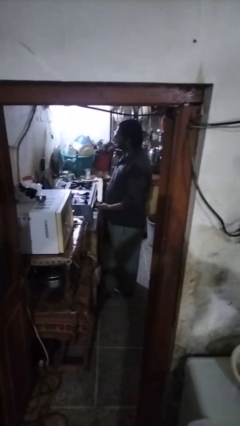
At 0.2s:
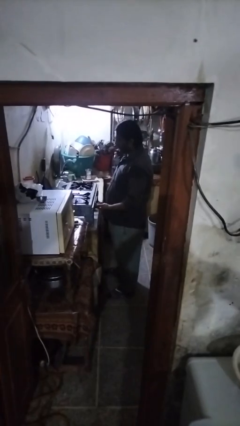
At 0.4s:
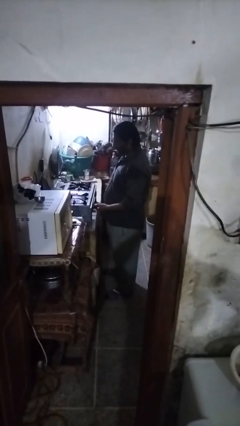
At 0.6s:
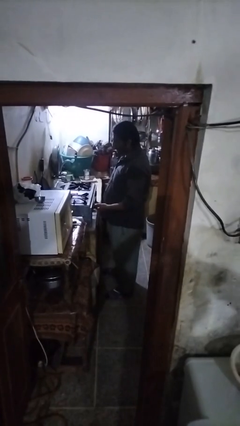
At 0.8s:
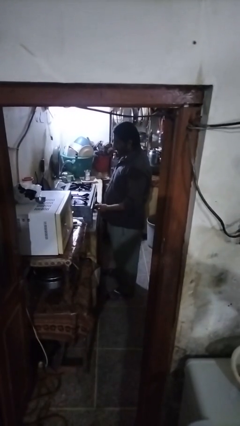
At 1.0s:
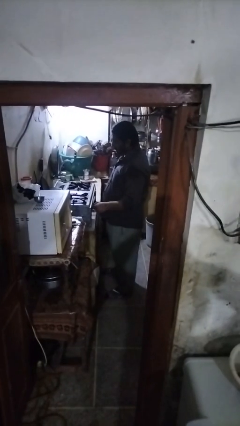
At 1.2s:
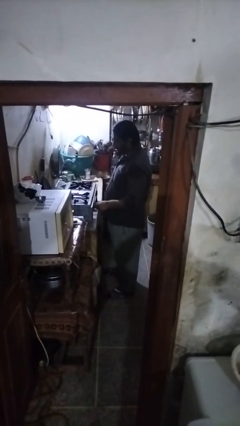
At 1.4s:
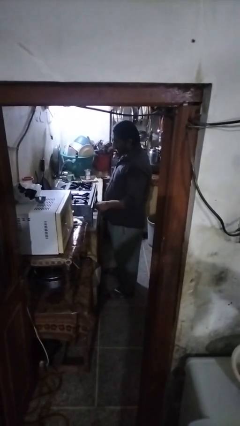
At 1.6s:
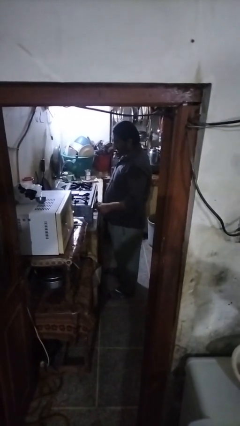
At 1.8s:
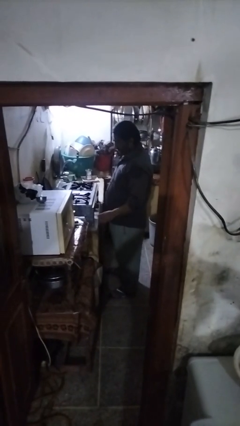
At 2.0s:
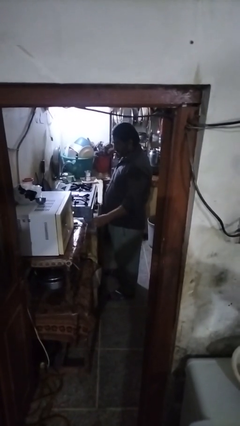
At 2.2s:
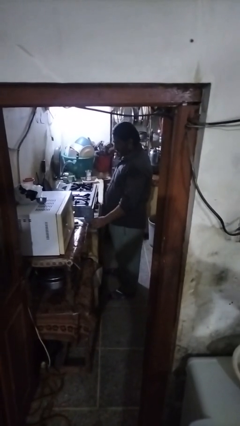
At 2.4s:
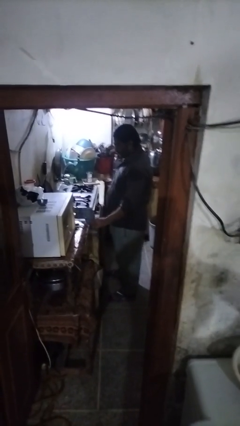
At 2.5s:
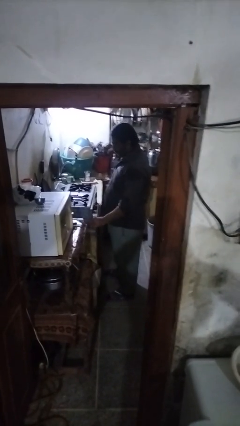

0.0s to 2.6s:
person turns off stovetop

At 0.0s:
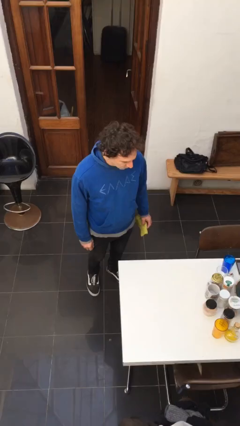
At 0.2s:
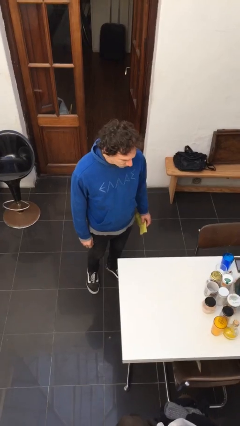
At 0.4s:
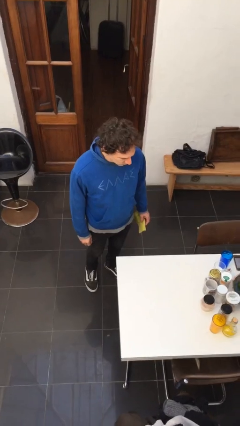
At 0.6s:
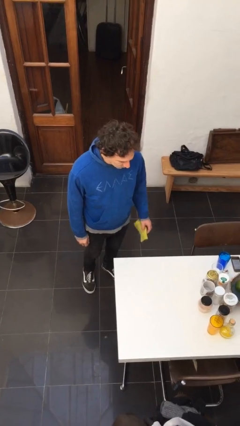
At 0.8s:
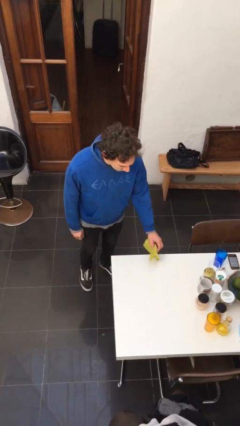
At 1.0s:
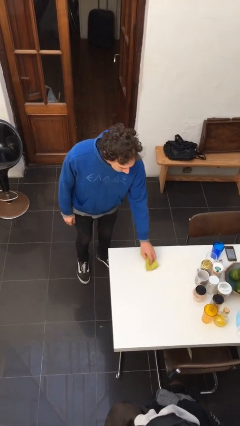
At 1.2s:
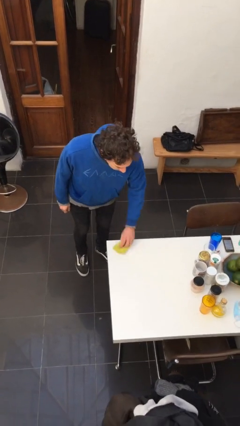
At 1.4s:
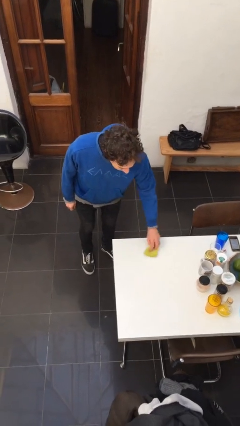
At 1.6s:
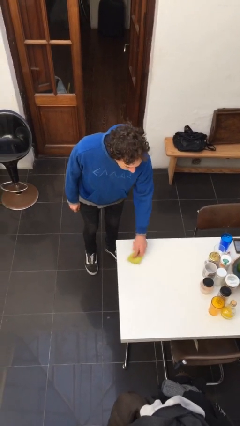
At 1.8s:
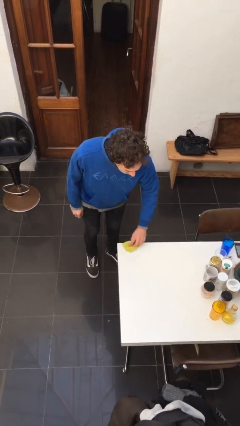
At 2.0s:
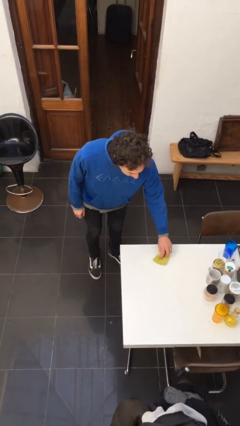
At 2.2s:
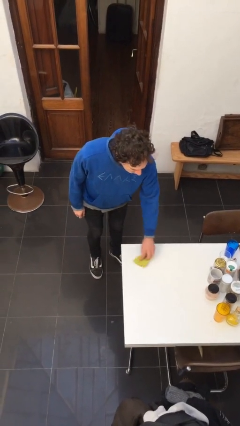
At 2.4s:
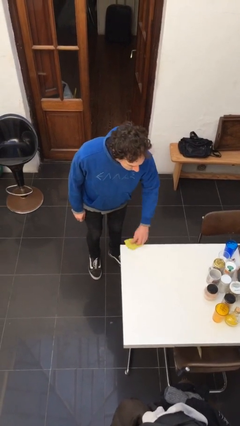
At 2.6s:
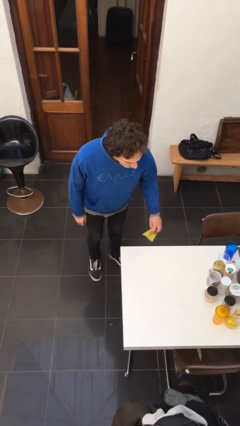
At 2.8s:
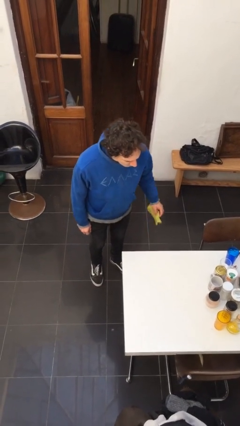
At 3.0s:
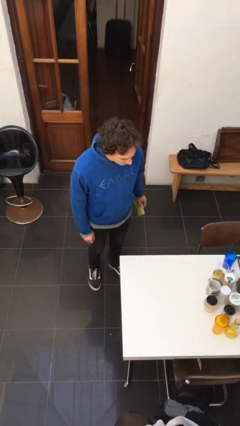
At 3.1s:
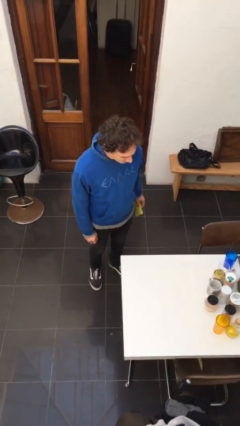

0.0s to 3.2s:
person cleans table with rag

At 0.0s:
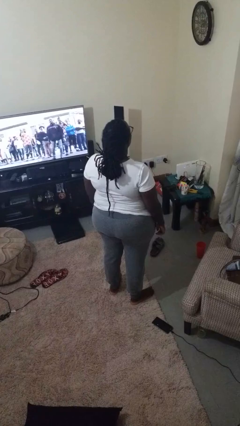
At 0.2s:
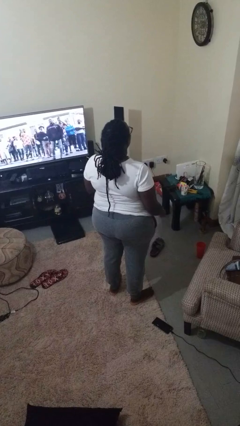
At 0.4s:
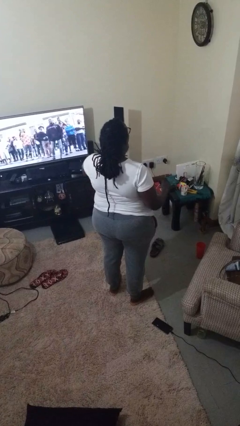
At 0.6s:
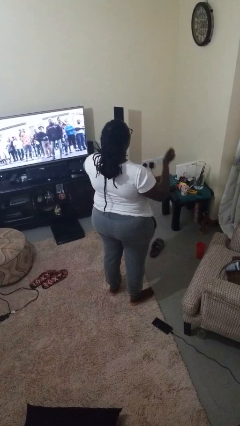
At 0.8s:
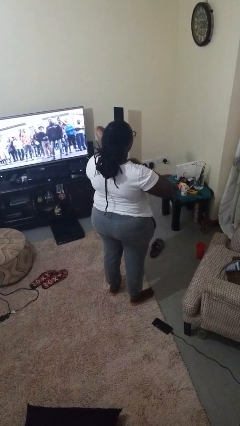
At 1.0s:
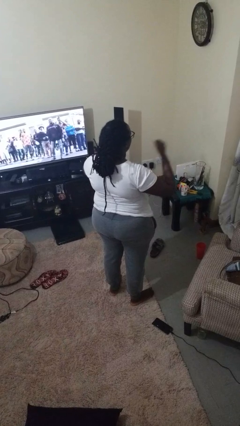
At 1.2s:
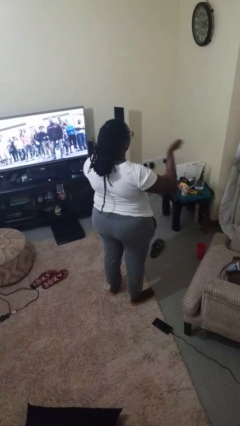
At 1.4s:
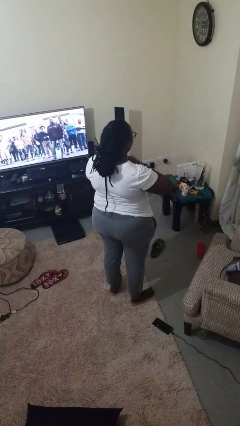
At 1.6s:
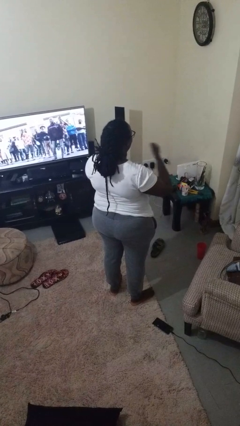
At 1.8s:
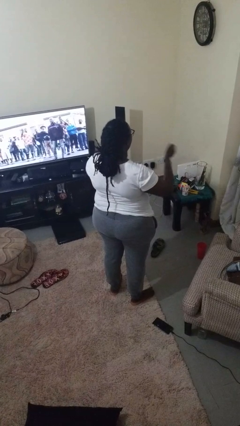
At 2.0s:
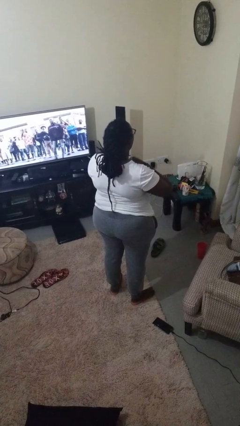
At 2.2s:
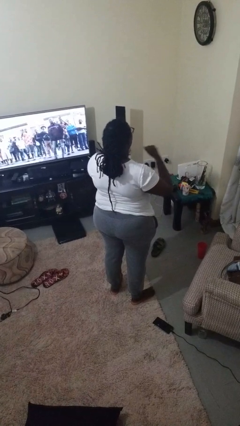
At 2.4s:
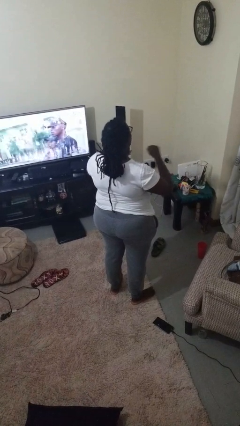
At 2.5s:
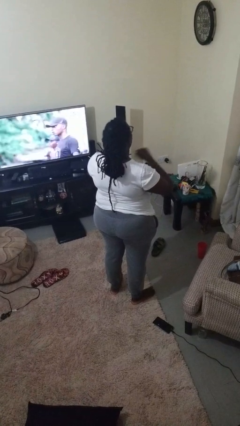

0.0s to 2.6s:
person drums on chest

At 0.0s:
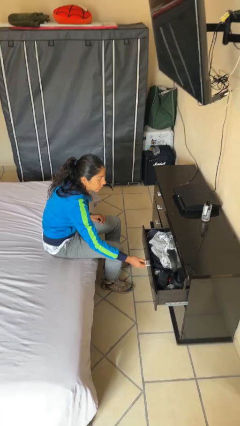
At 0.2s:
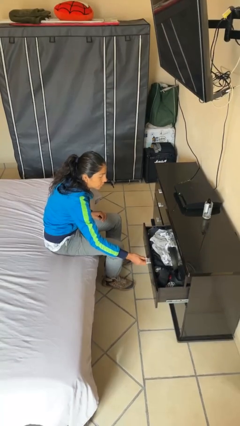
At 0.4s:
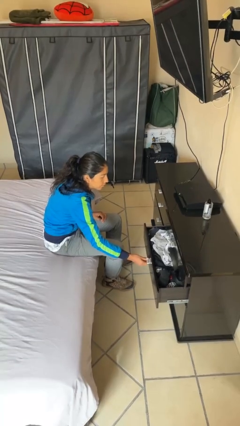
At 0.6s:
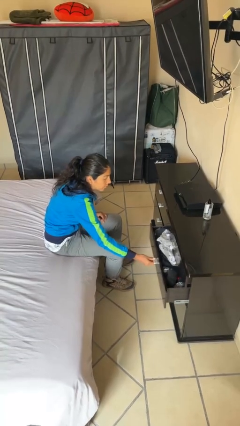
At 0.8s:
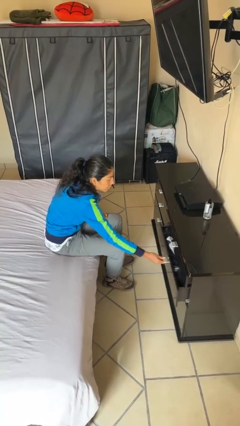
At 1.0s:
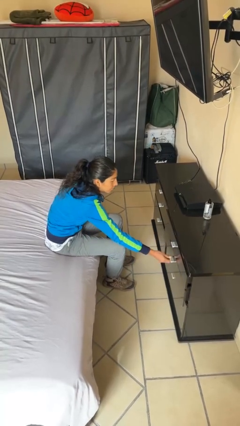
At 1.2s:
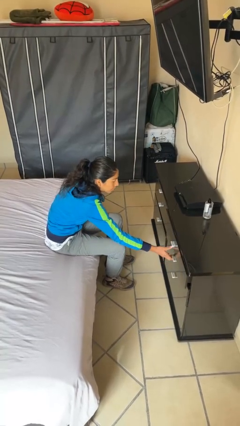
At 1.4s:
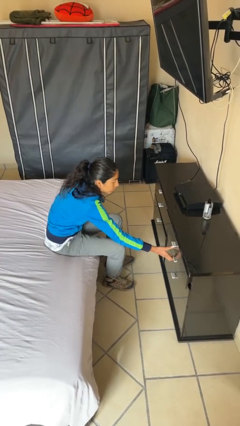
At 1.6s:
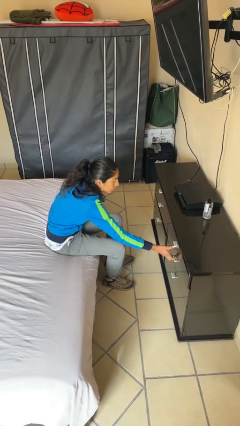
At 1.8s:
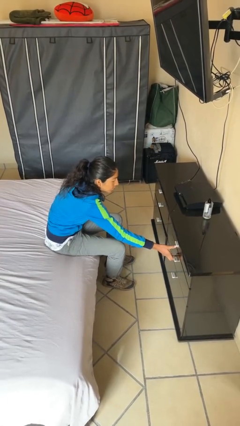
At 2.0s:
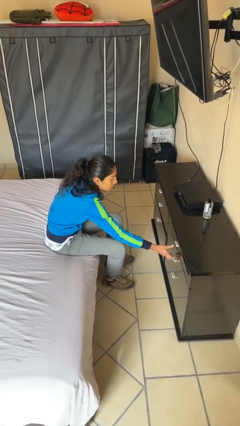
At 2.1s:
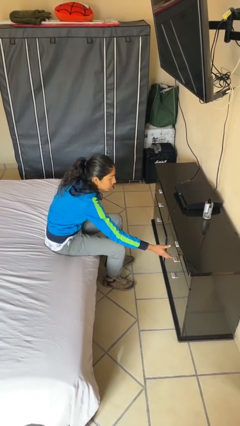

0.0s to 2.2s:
person closes dresser drawer

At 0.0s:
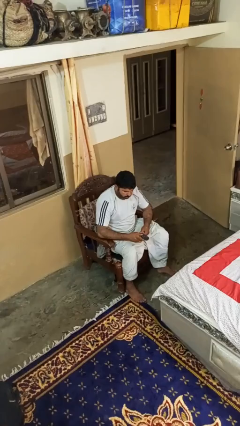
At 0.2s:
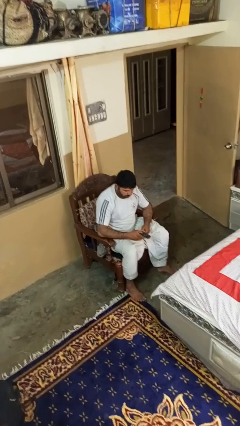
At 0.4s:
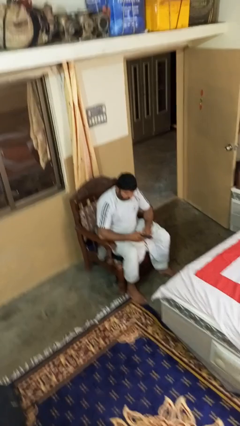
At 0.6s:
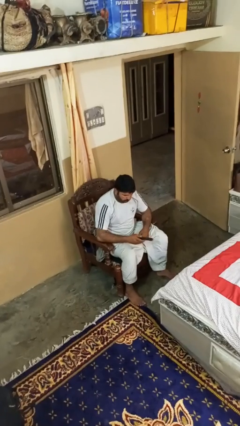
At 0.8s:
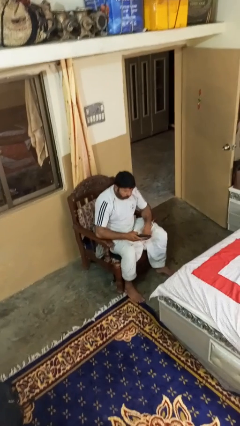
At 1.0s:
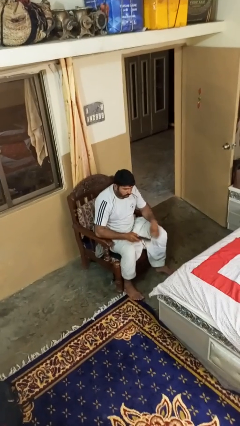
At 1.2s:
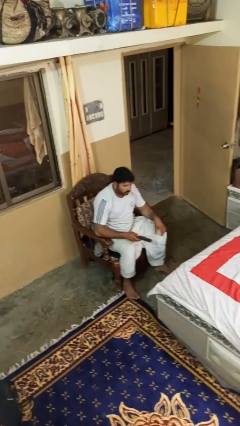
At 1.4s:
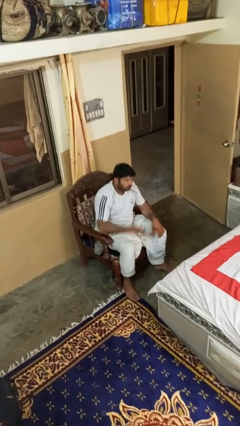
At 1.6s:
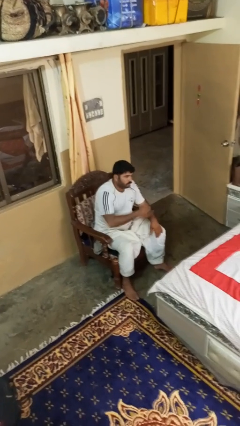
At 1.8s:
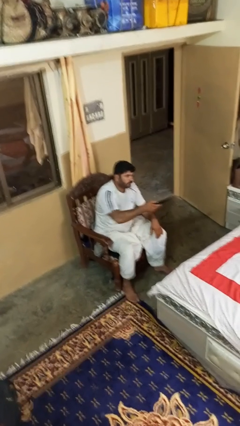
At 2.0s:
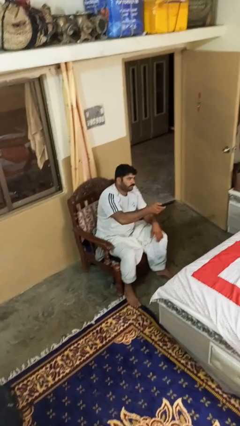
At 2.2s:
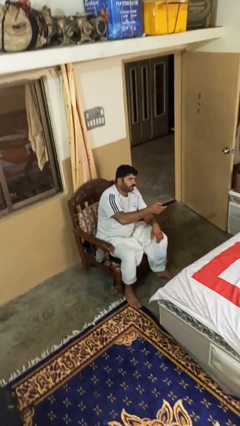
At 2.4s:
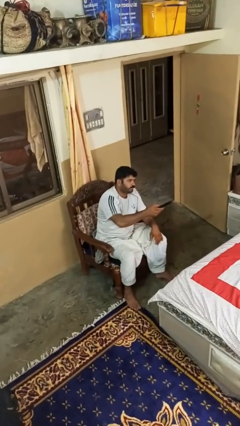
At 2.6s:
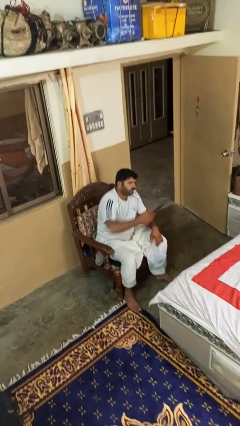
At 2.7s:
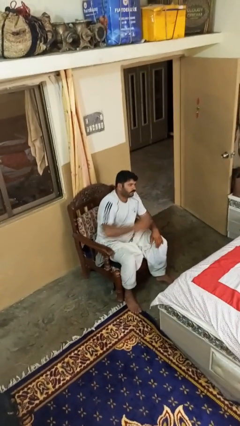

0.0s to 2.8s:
person uses television remote

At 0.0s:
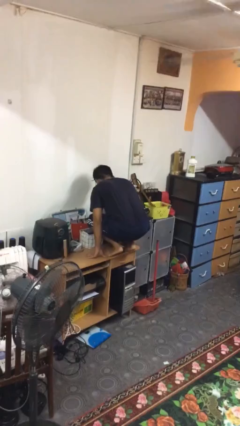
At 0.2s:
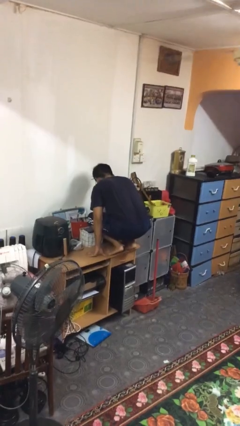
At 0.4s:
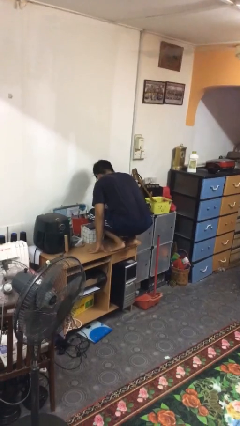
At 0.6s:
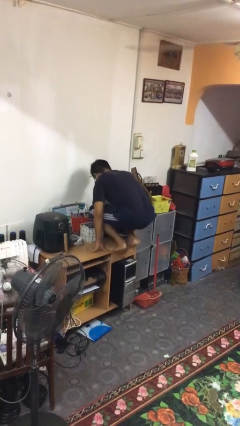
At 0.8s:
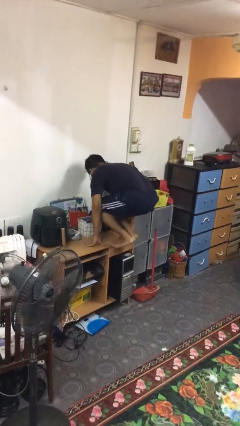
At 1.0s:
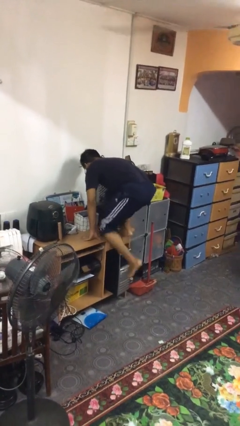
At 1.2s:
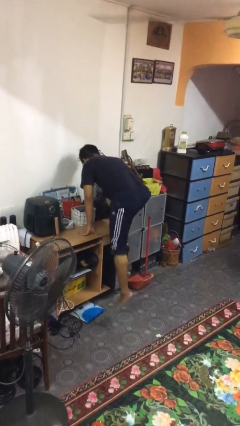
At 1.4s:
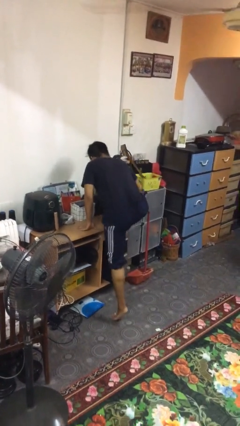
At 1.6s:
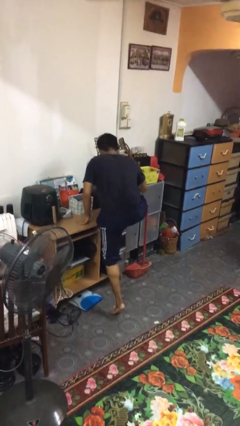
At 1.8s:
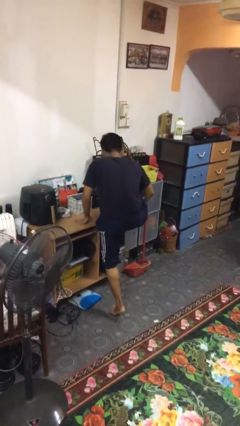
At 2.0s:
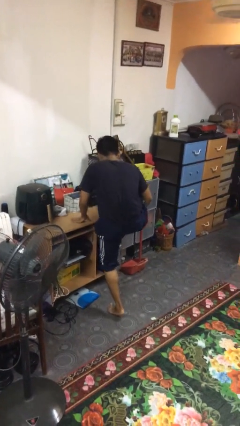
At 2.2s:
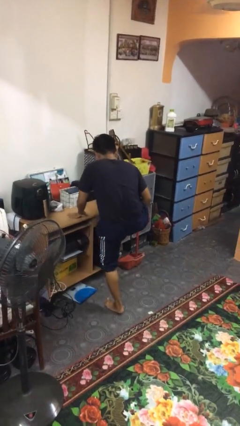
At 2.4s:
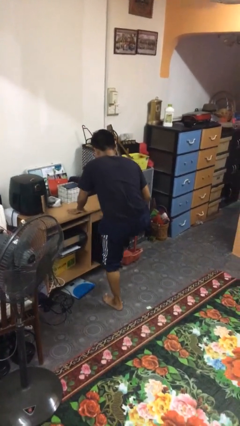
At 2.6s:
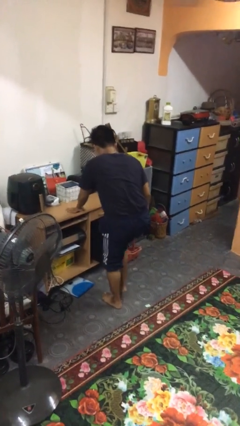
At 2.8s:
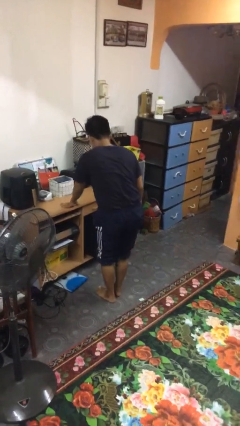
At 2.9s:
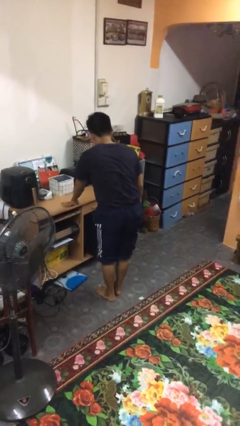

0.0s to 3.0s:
person climbs off table

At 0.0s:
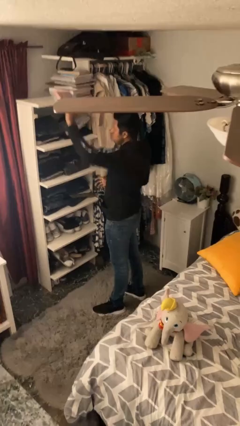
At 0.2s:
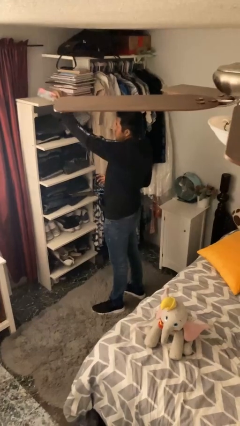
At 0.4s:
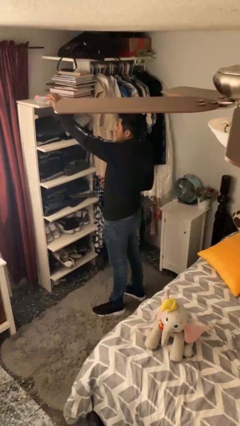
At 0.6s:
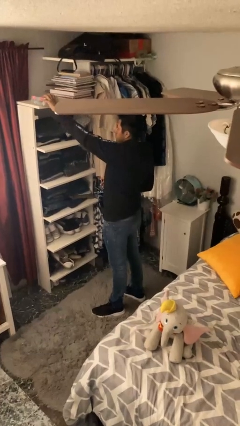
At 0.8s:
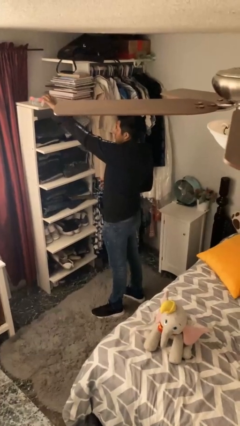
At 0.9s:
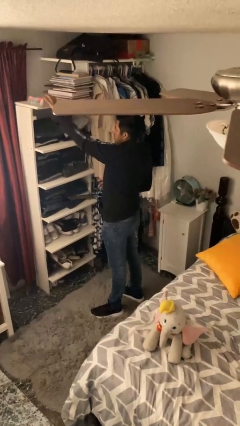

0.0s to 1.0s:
person puts down object on shelf
